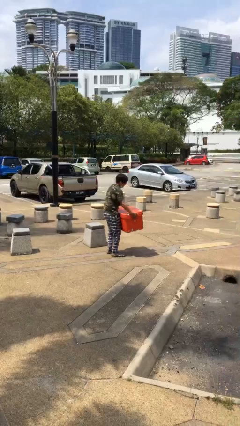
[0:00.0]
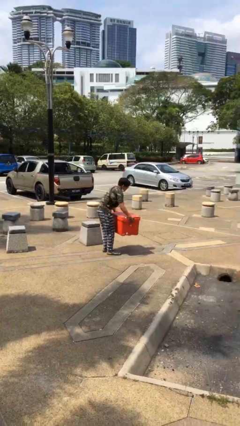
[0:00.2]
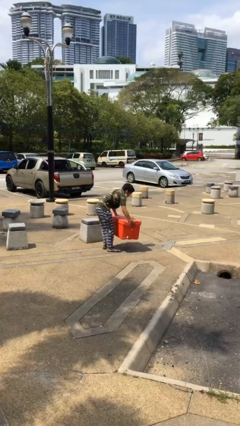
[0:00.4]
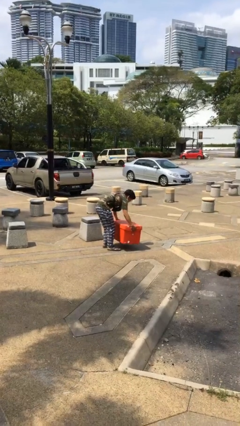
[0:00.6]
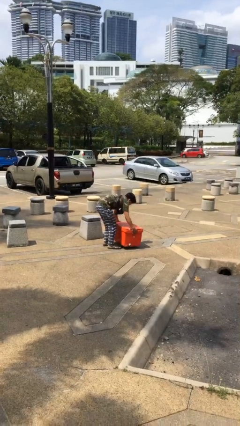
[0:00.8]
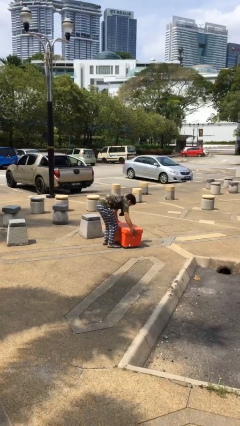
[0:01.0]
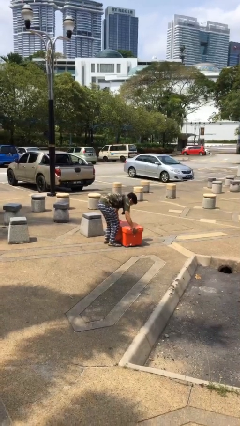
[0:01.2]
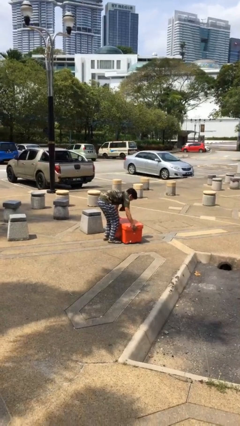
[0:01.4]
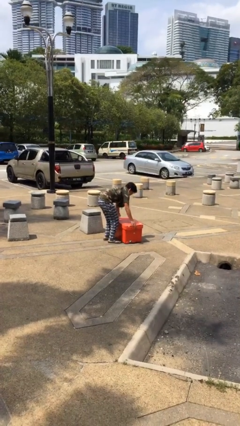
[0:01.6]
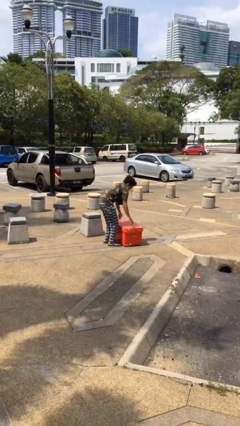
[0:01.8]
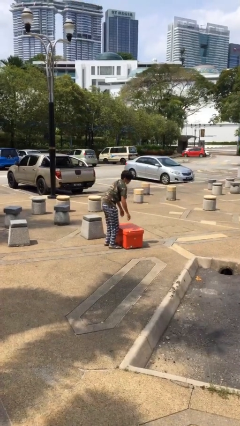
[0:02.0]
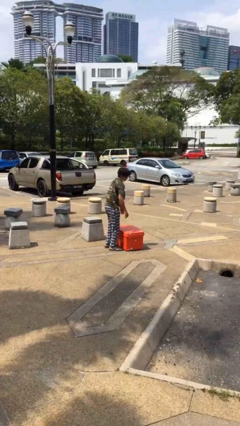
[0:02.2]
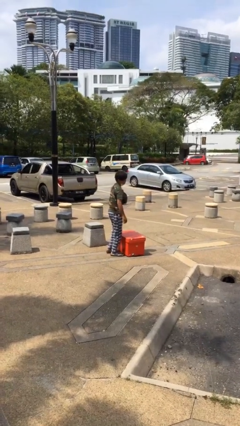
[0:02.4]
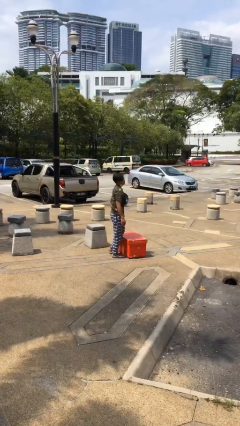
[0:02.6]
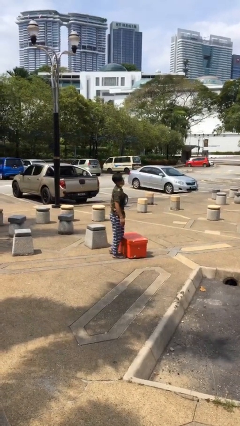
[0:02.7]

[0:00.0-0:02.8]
person puts down object on floor

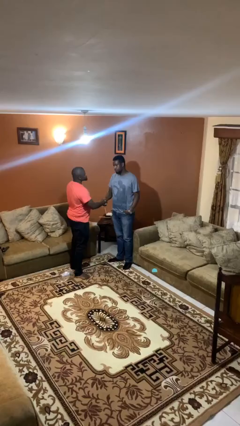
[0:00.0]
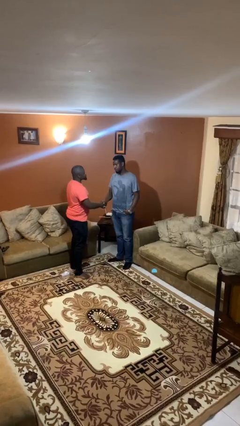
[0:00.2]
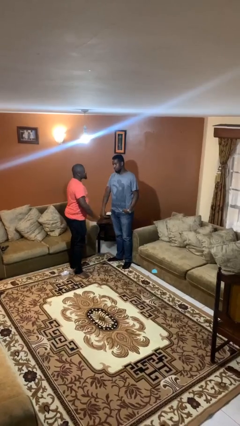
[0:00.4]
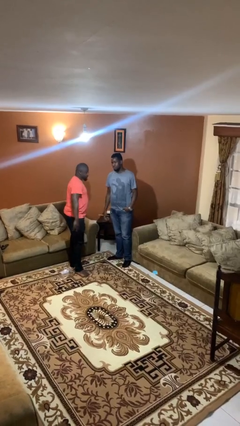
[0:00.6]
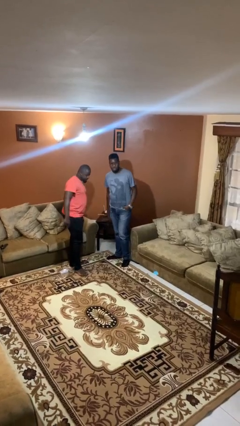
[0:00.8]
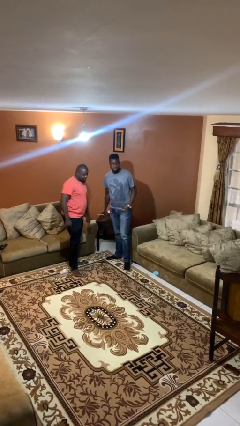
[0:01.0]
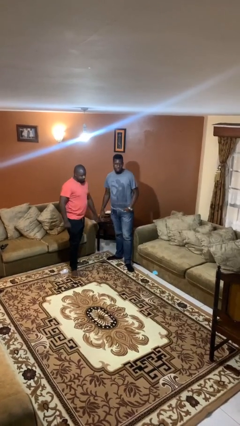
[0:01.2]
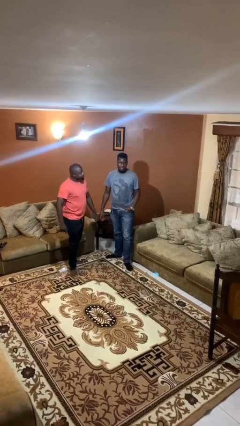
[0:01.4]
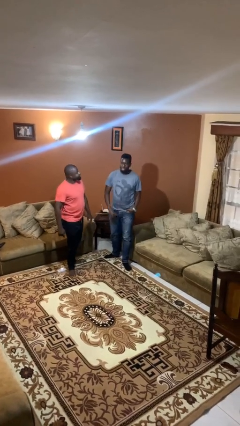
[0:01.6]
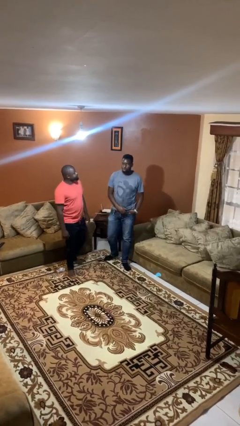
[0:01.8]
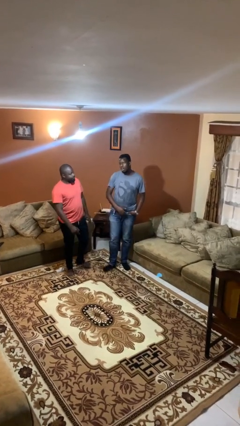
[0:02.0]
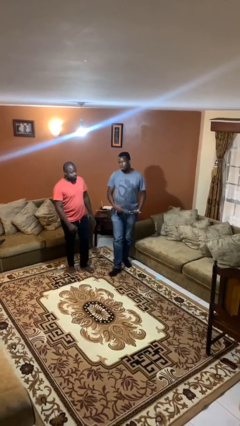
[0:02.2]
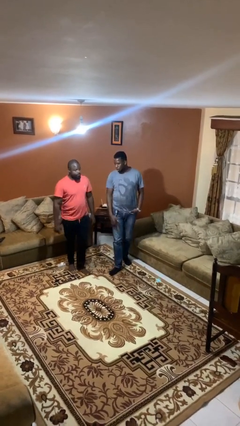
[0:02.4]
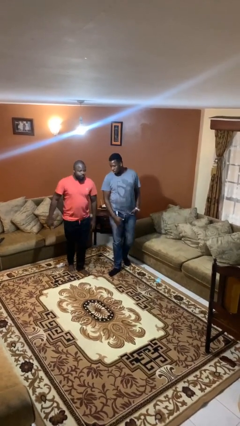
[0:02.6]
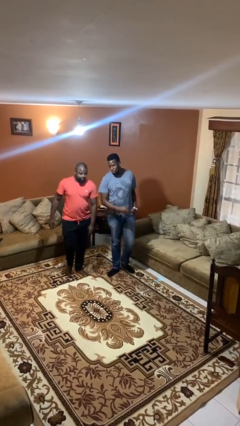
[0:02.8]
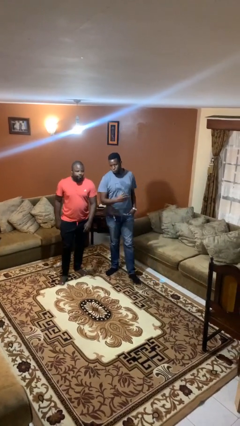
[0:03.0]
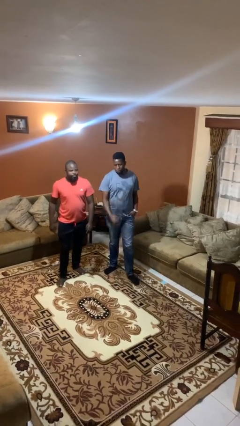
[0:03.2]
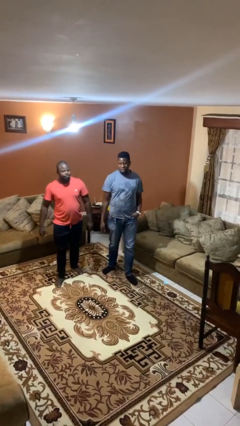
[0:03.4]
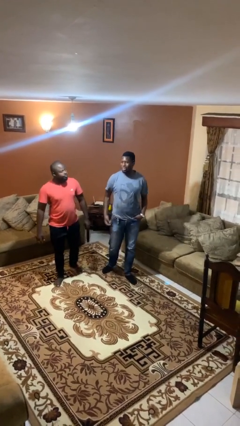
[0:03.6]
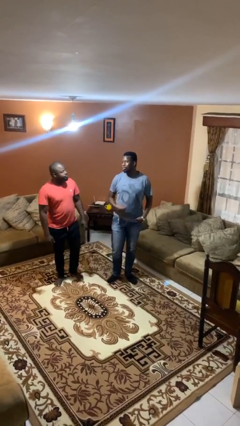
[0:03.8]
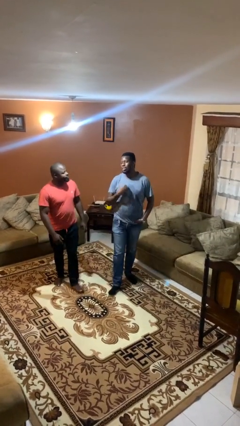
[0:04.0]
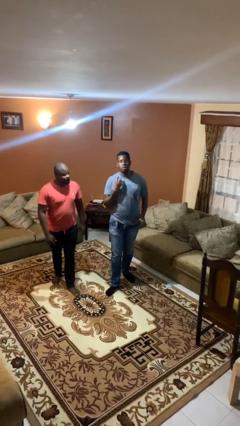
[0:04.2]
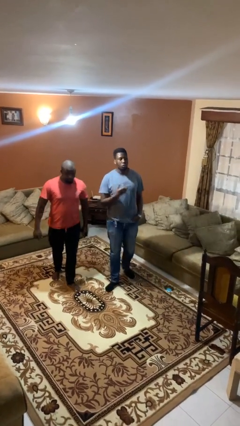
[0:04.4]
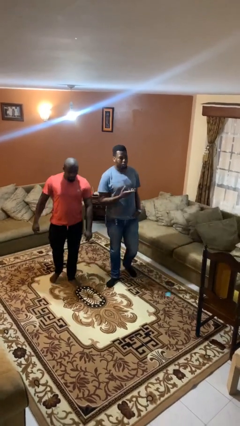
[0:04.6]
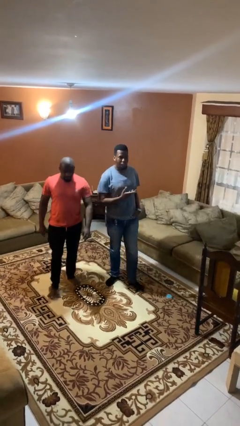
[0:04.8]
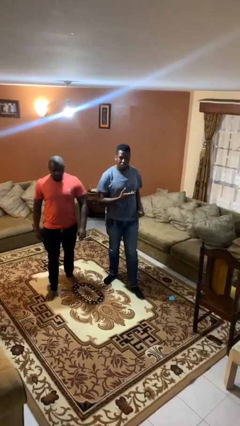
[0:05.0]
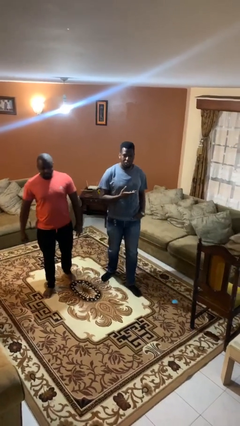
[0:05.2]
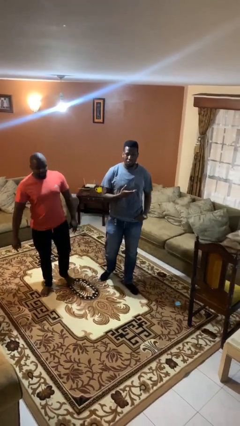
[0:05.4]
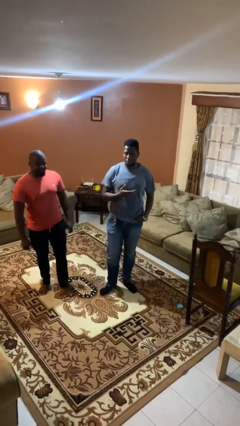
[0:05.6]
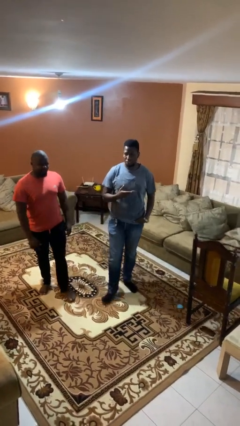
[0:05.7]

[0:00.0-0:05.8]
person talks to person

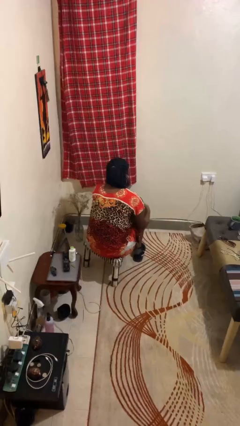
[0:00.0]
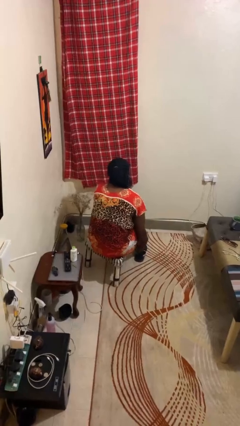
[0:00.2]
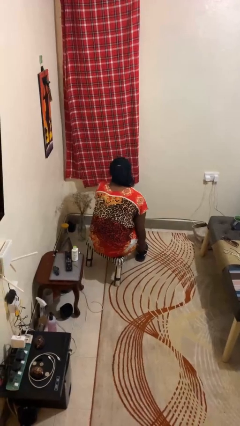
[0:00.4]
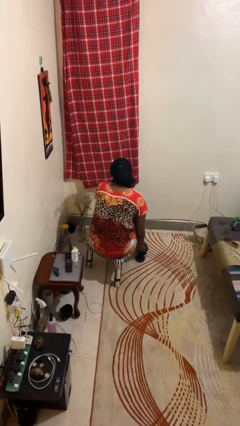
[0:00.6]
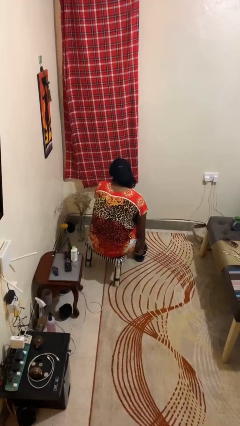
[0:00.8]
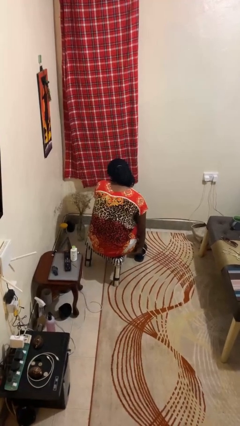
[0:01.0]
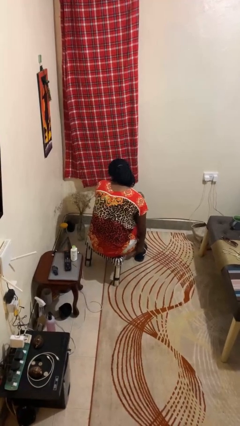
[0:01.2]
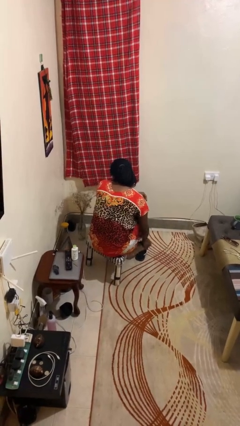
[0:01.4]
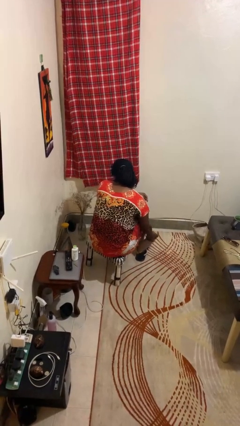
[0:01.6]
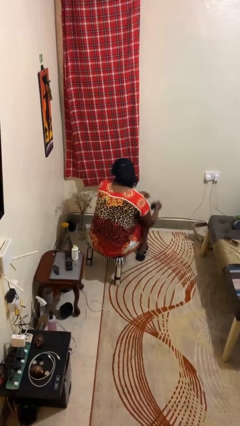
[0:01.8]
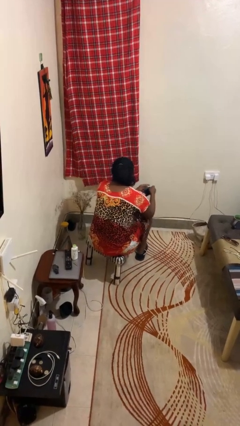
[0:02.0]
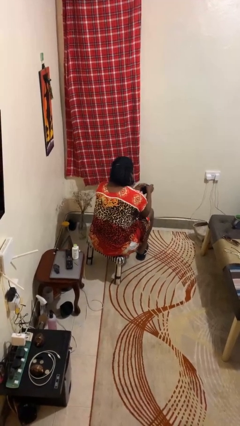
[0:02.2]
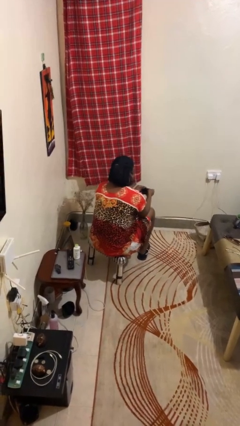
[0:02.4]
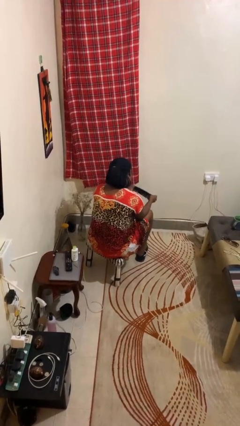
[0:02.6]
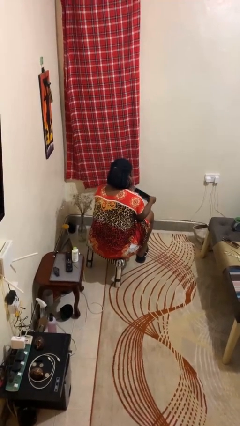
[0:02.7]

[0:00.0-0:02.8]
person takes off socks

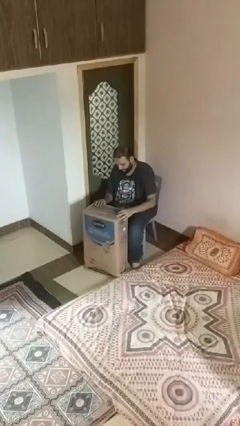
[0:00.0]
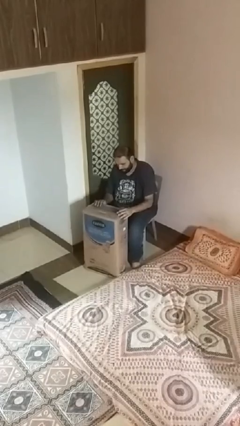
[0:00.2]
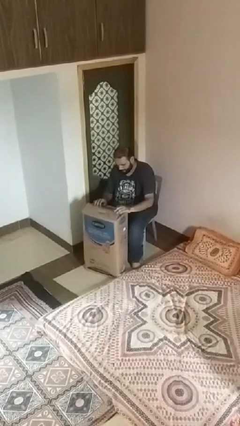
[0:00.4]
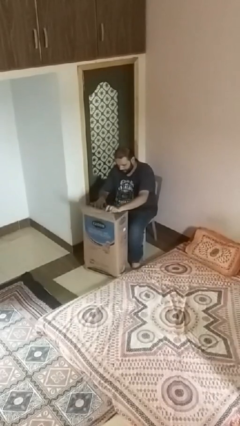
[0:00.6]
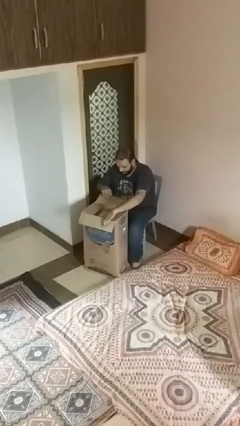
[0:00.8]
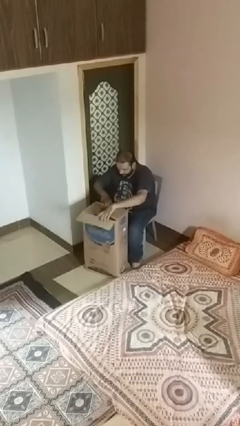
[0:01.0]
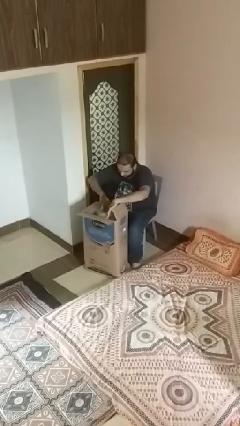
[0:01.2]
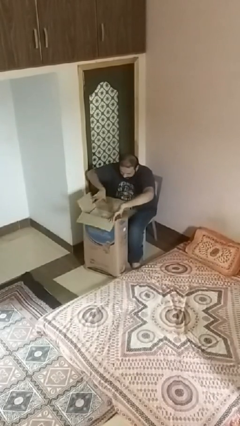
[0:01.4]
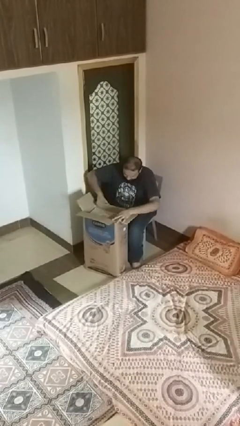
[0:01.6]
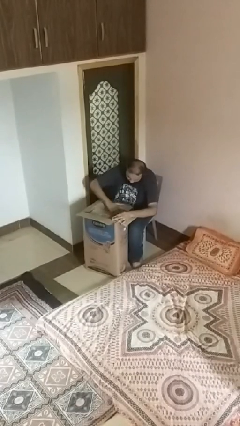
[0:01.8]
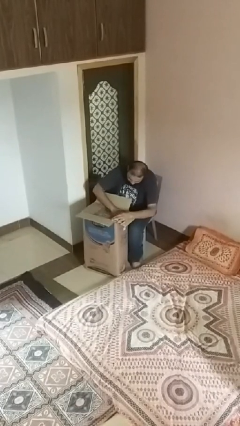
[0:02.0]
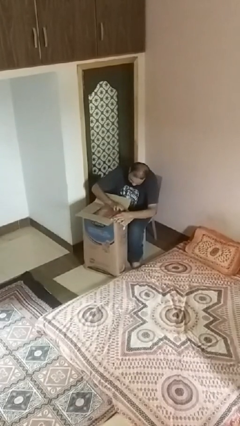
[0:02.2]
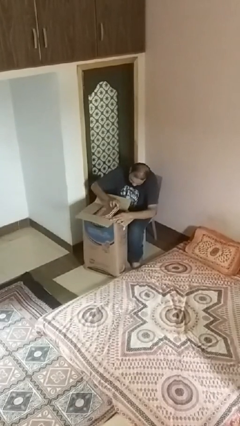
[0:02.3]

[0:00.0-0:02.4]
person searches in box

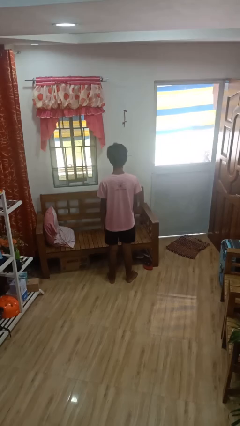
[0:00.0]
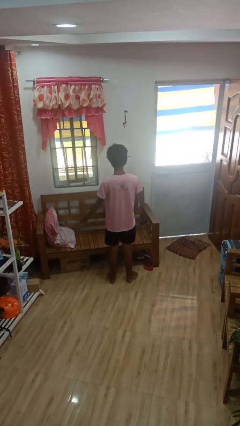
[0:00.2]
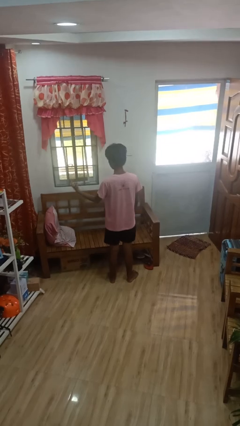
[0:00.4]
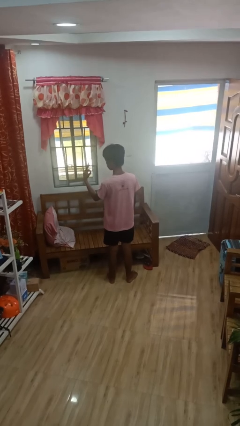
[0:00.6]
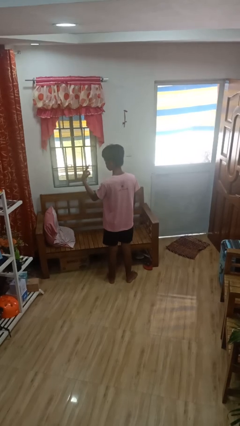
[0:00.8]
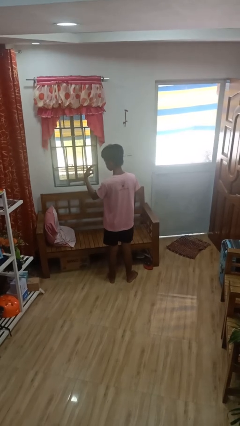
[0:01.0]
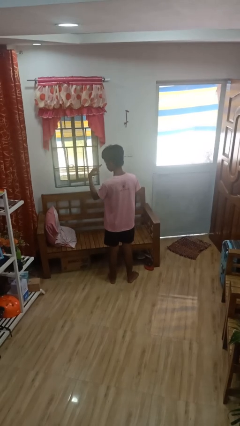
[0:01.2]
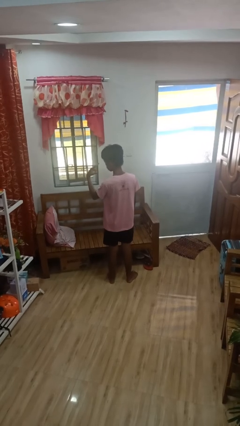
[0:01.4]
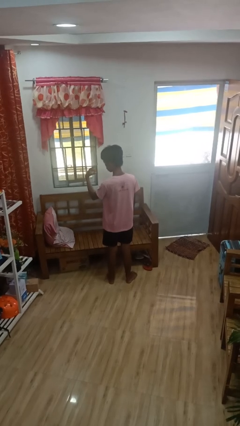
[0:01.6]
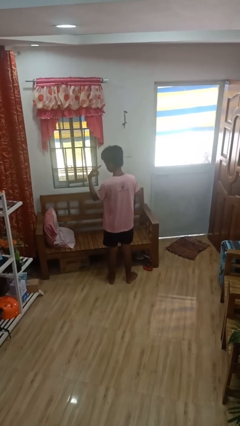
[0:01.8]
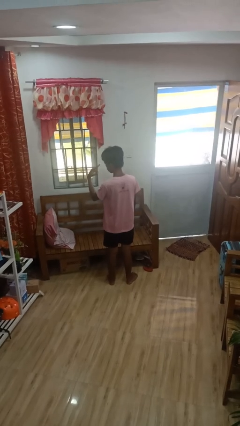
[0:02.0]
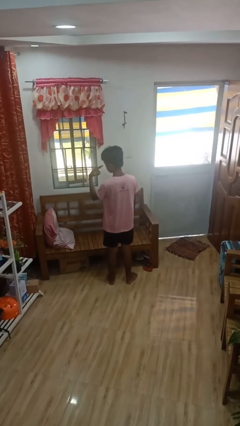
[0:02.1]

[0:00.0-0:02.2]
person gestures watch closely

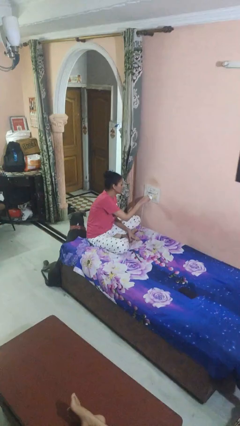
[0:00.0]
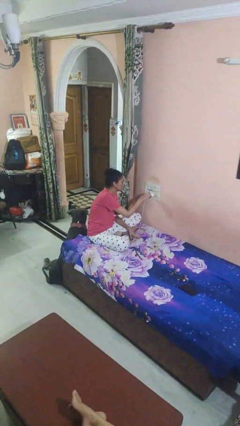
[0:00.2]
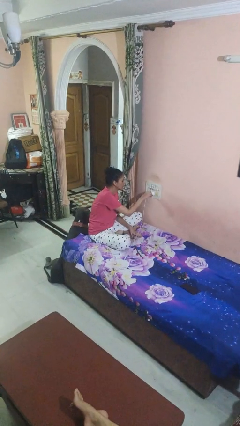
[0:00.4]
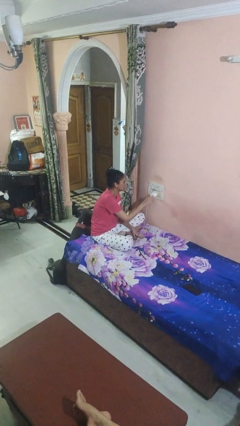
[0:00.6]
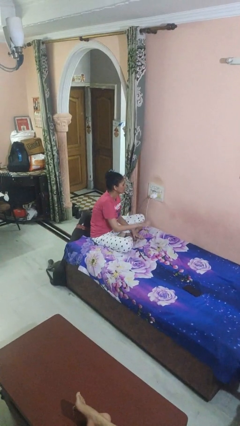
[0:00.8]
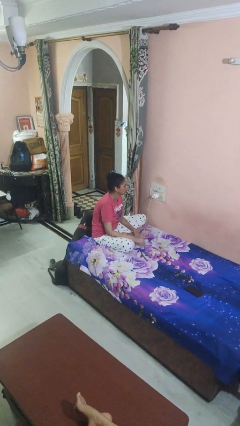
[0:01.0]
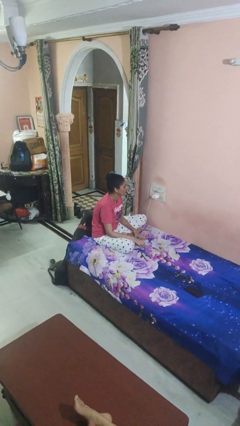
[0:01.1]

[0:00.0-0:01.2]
person plugs into electrical socket

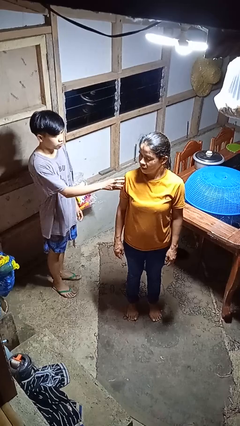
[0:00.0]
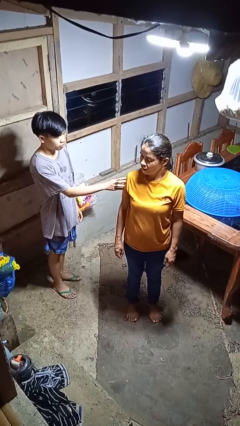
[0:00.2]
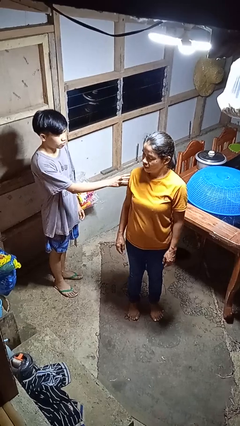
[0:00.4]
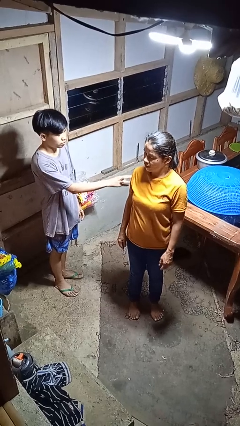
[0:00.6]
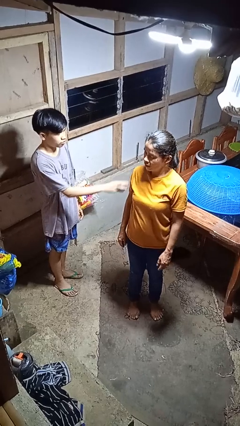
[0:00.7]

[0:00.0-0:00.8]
person grabs person by forearm
